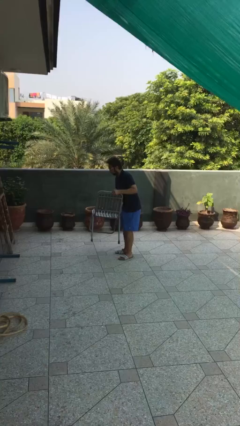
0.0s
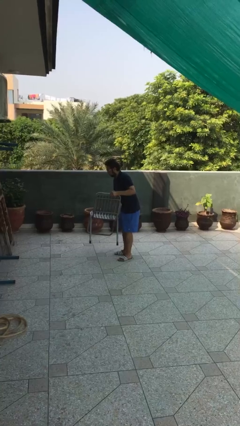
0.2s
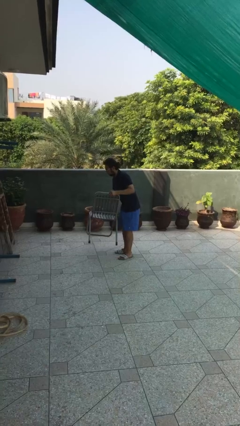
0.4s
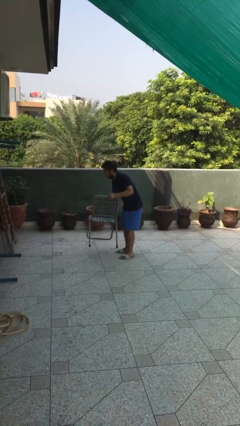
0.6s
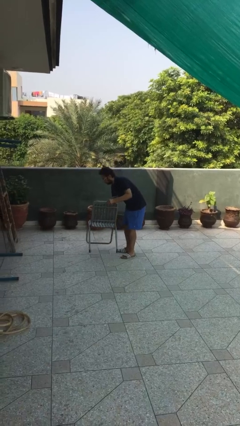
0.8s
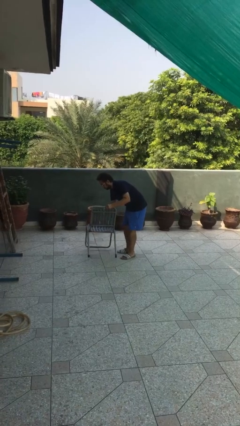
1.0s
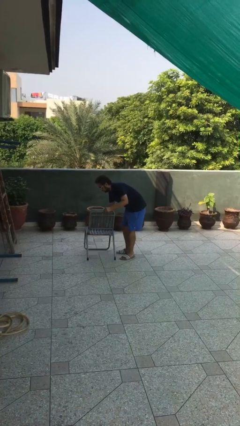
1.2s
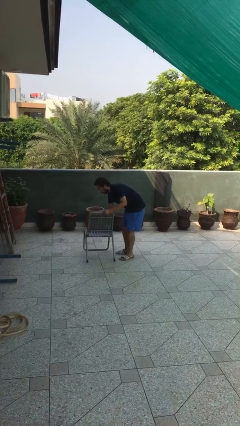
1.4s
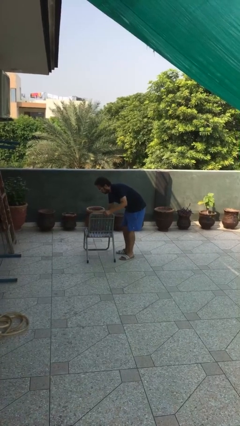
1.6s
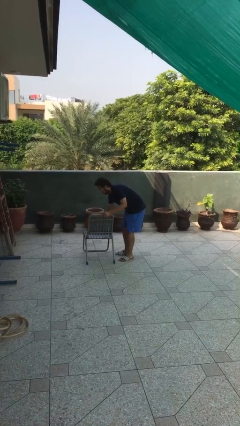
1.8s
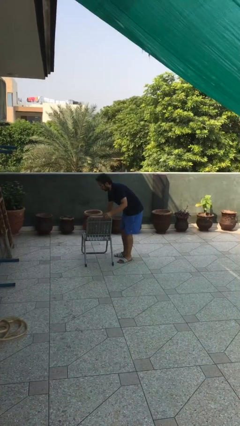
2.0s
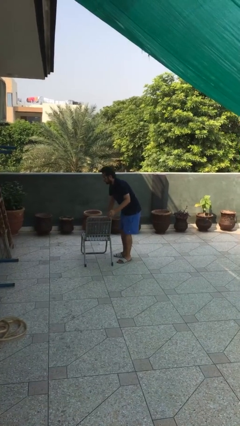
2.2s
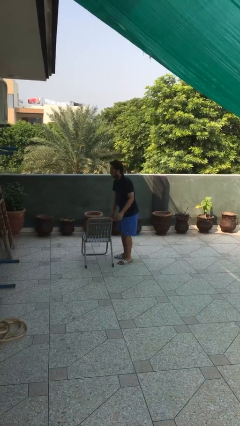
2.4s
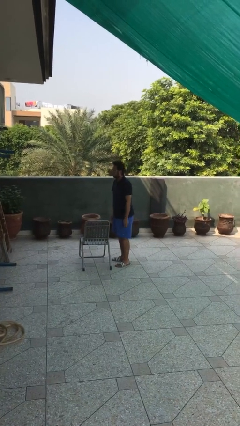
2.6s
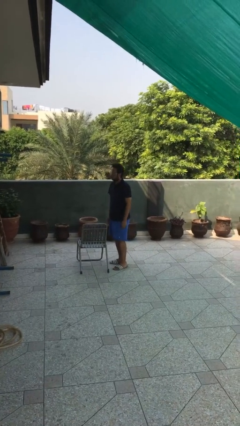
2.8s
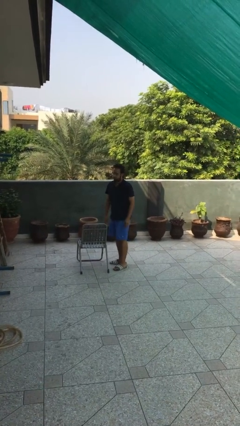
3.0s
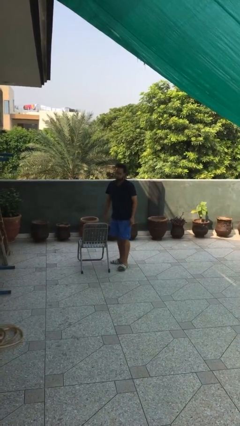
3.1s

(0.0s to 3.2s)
person puts down object on floor

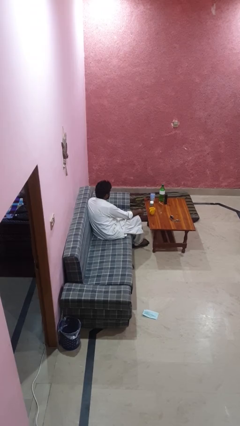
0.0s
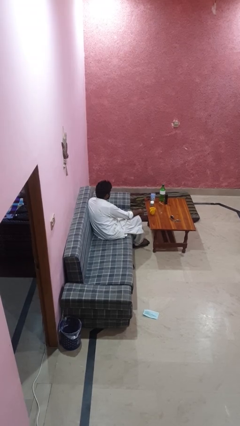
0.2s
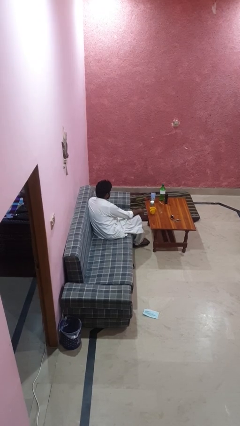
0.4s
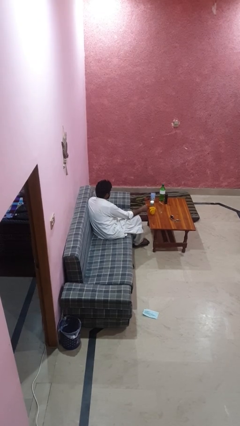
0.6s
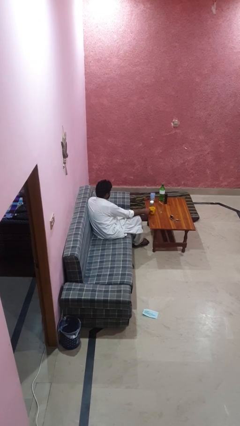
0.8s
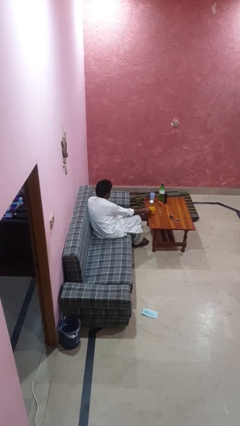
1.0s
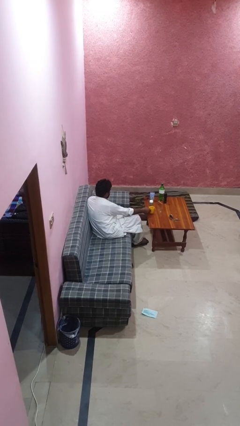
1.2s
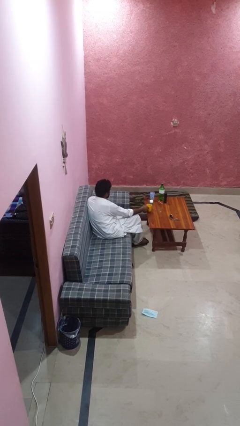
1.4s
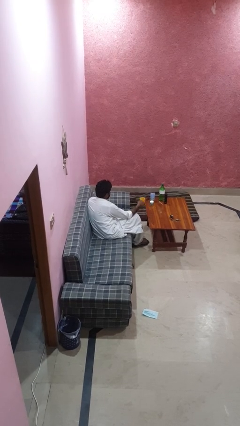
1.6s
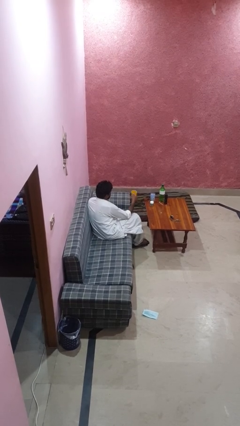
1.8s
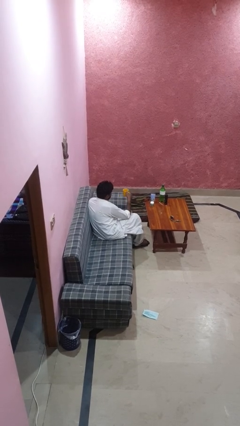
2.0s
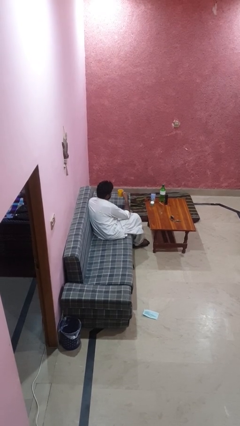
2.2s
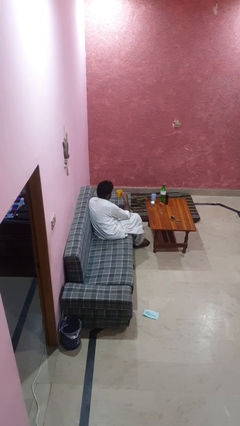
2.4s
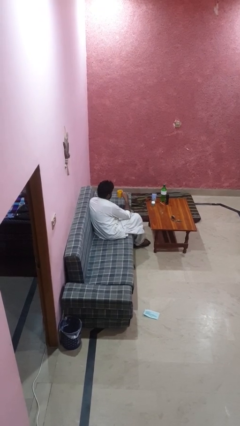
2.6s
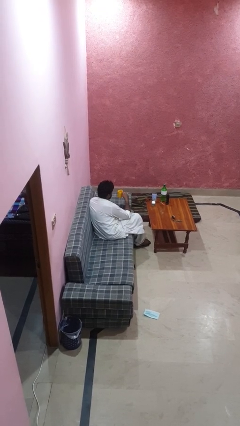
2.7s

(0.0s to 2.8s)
person picks up object from table

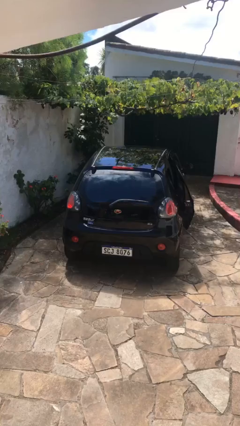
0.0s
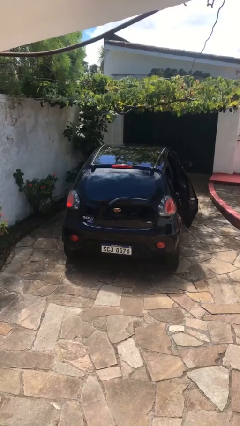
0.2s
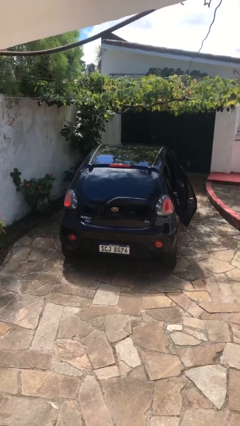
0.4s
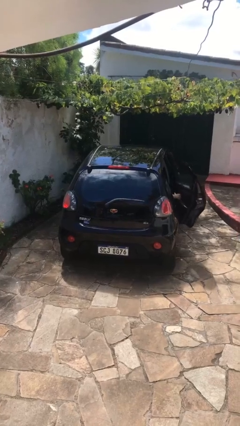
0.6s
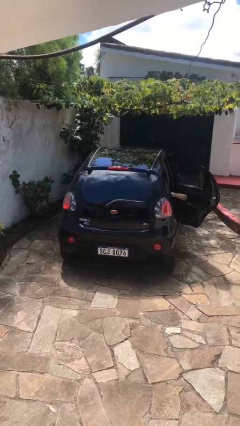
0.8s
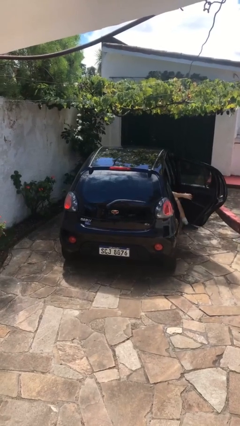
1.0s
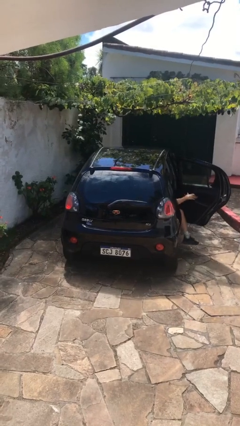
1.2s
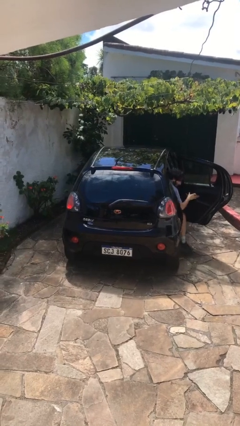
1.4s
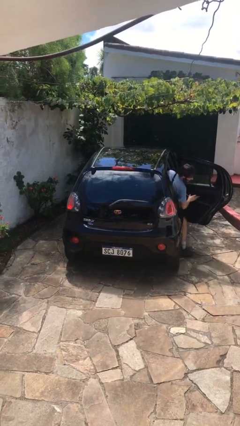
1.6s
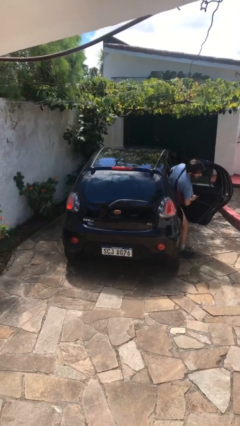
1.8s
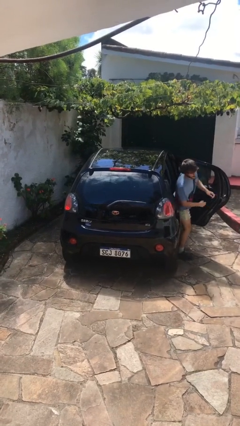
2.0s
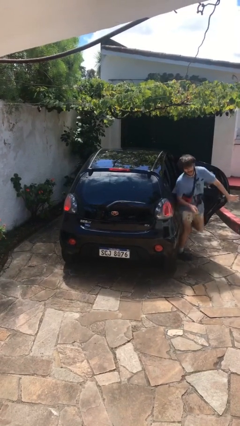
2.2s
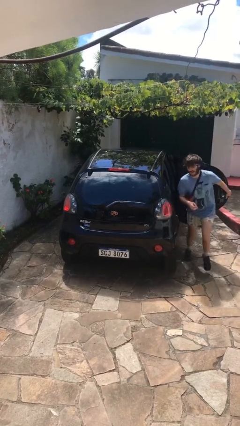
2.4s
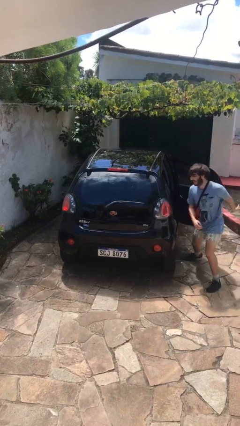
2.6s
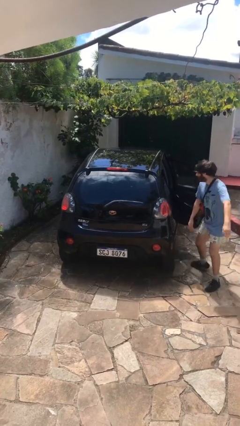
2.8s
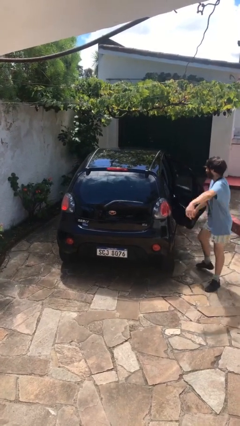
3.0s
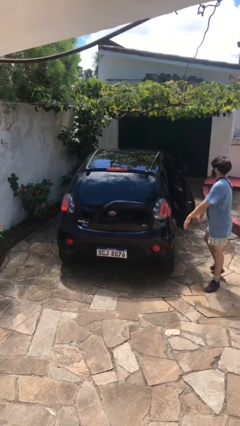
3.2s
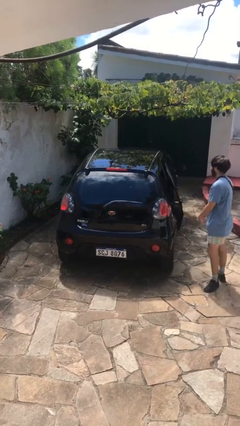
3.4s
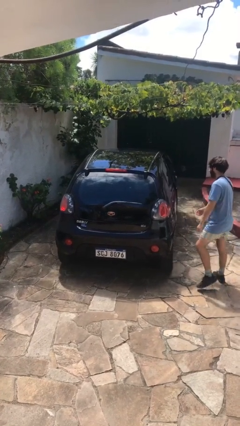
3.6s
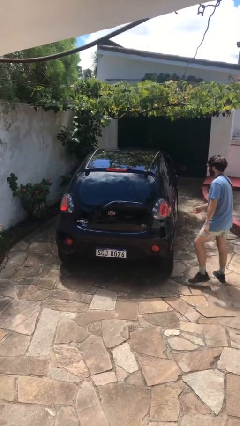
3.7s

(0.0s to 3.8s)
car drops off person

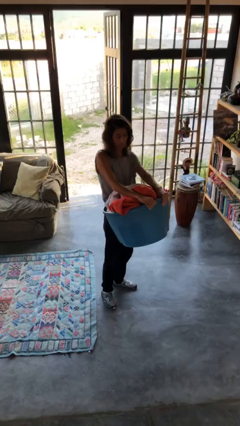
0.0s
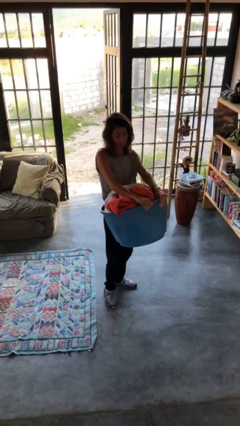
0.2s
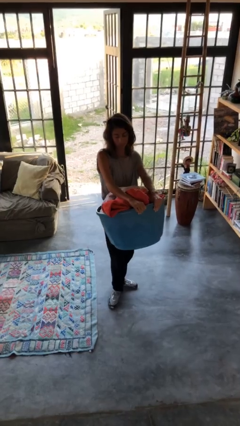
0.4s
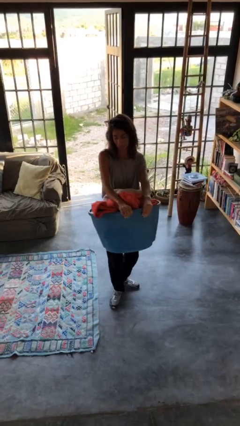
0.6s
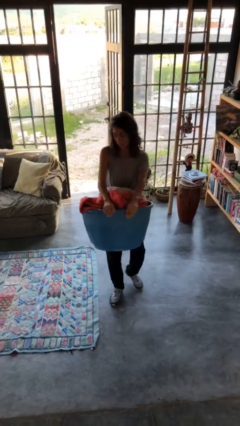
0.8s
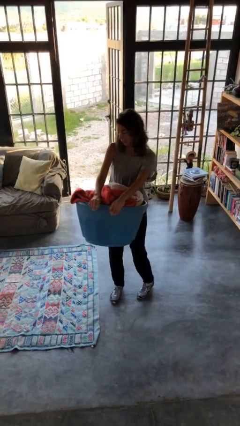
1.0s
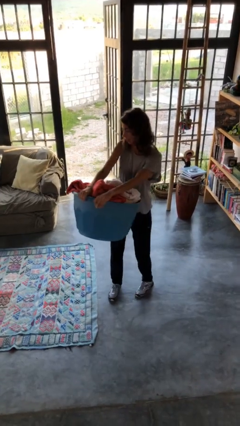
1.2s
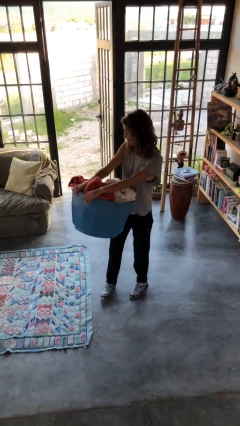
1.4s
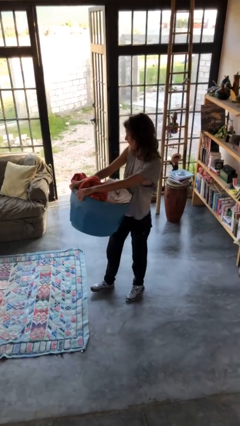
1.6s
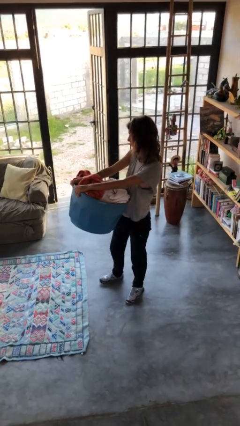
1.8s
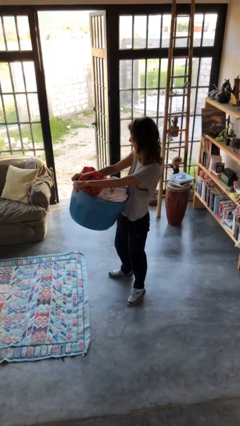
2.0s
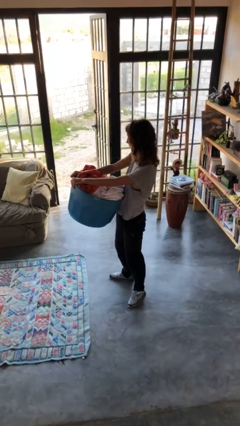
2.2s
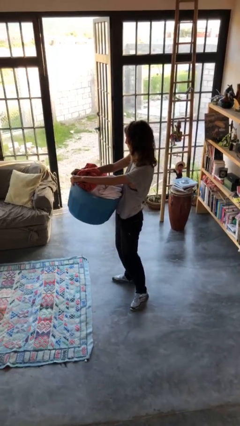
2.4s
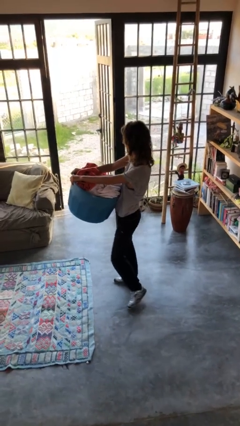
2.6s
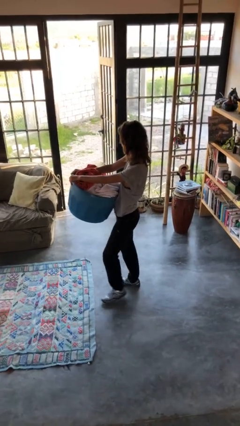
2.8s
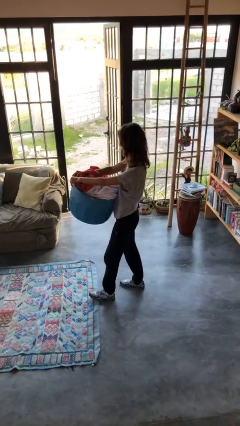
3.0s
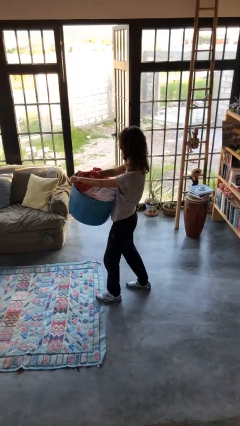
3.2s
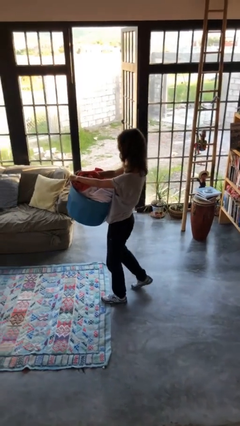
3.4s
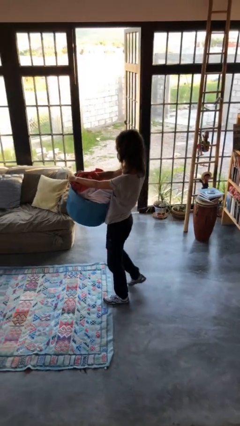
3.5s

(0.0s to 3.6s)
person carries laundry basket

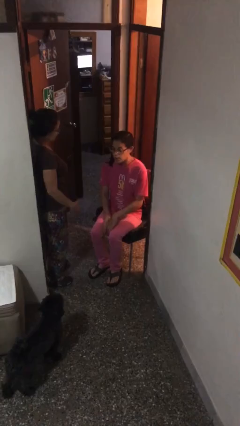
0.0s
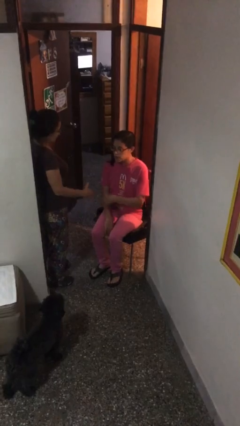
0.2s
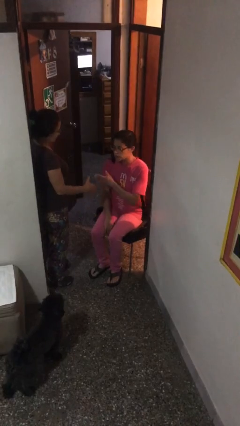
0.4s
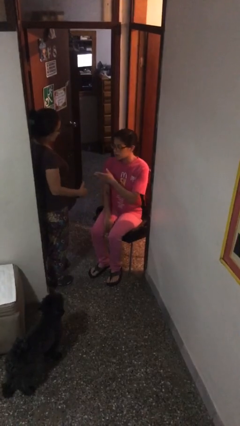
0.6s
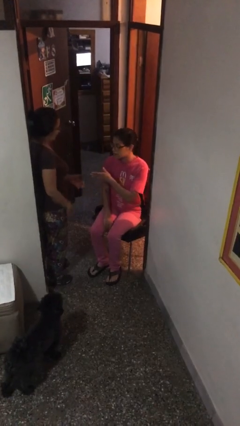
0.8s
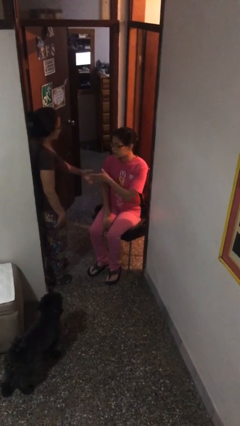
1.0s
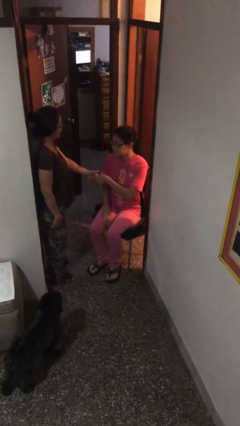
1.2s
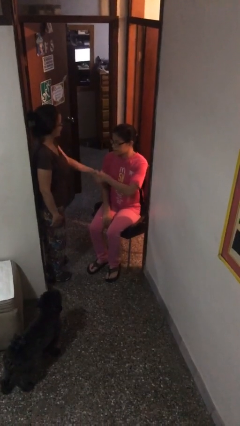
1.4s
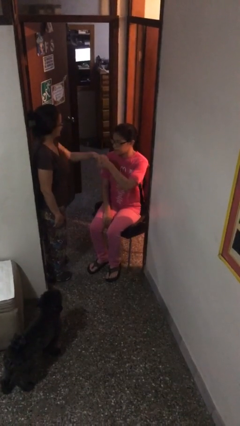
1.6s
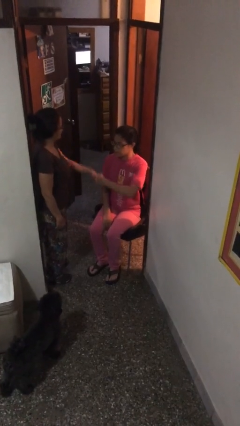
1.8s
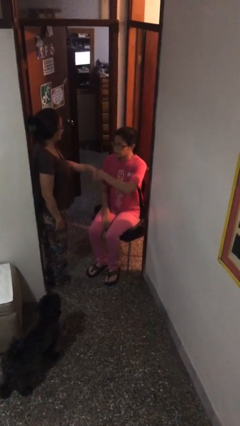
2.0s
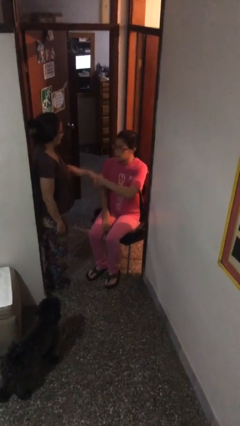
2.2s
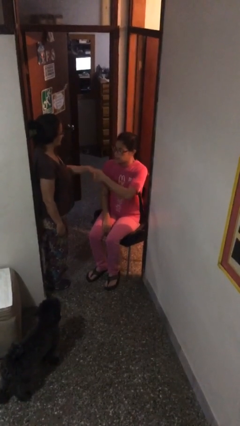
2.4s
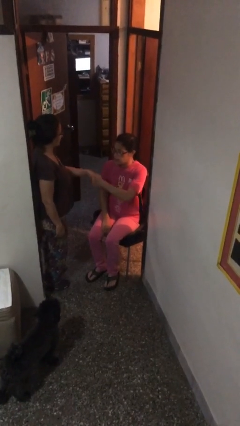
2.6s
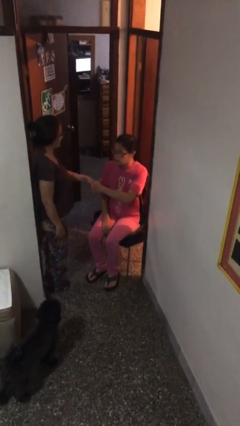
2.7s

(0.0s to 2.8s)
person shakes hand

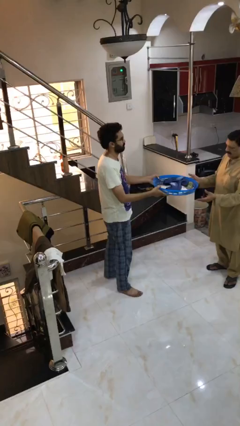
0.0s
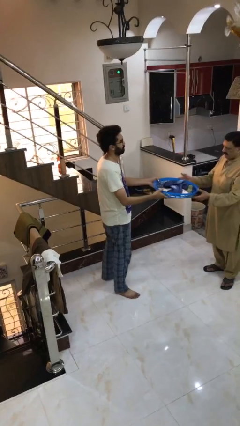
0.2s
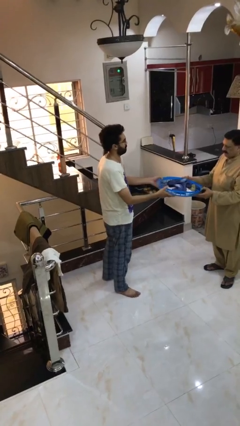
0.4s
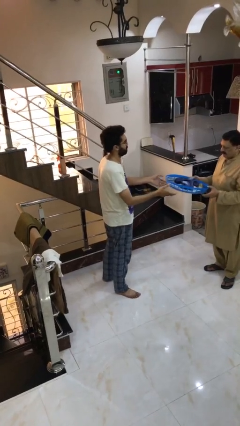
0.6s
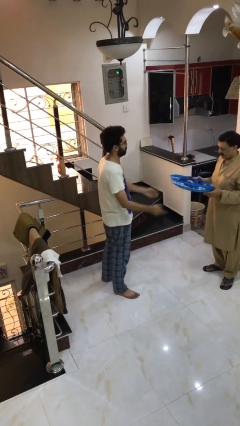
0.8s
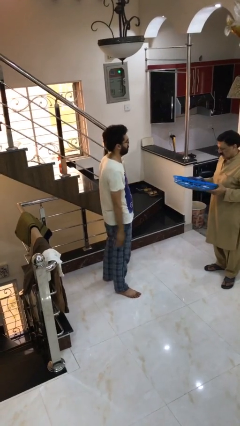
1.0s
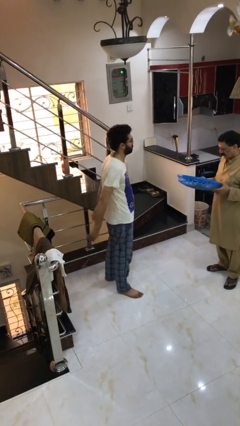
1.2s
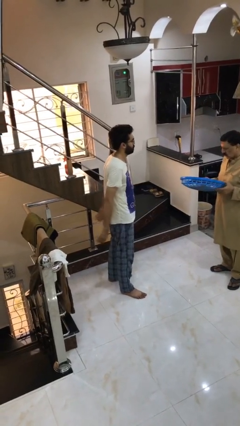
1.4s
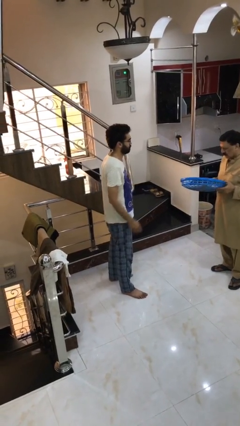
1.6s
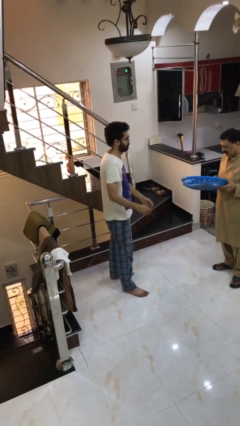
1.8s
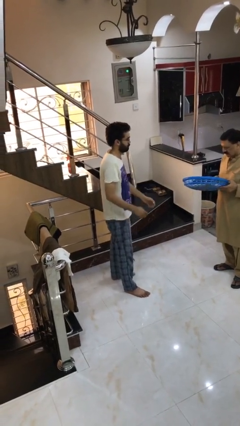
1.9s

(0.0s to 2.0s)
person transfers object to person
